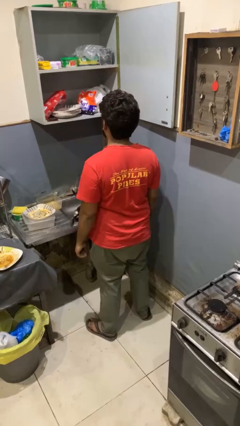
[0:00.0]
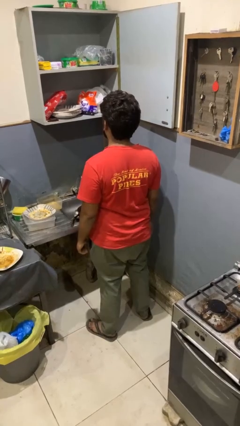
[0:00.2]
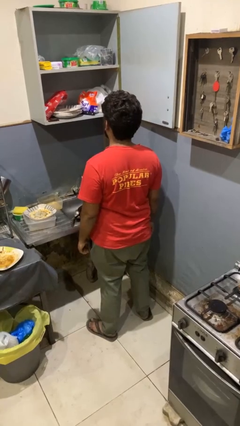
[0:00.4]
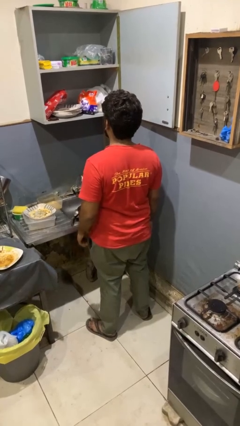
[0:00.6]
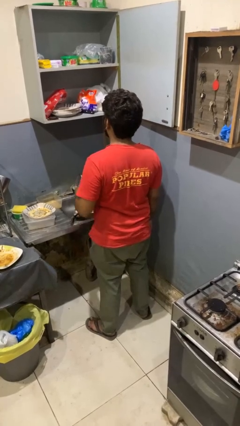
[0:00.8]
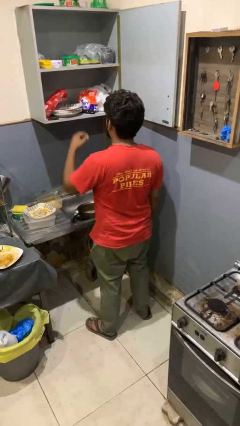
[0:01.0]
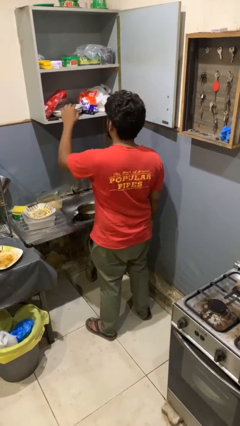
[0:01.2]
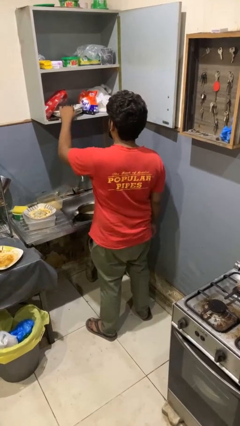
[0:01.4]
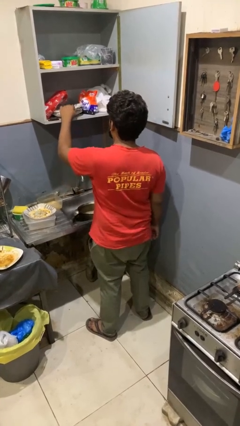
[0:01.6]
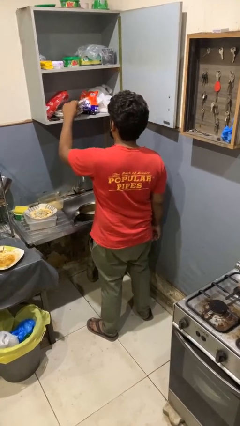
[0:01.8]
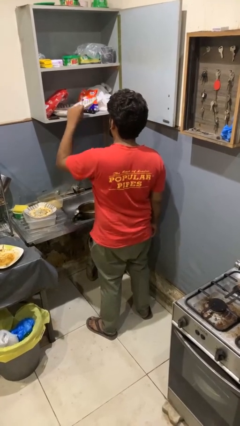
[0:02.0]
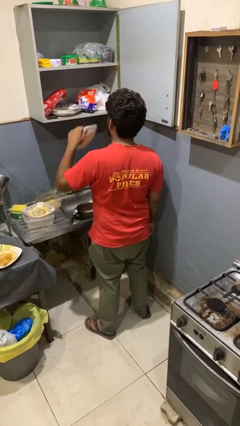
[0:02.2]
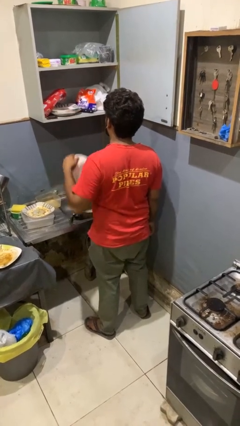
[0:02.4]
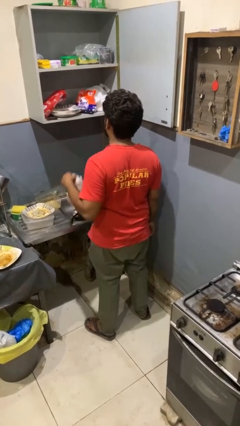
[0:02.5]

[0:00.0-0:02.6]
person takes object from cabinet

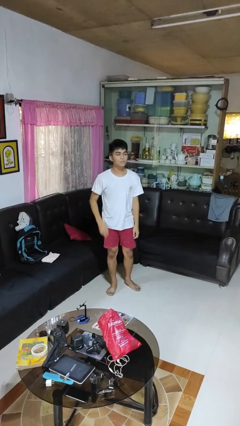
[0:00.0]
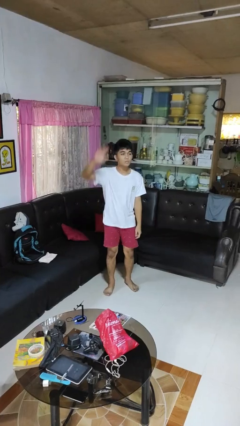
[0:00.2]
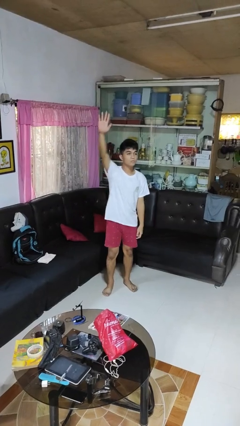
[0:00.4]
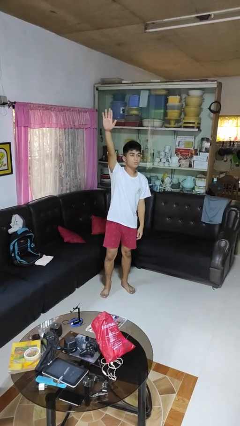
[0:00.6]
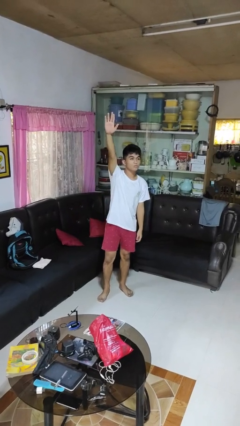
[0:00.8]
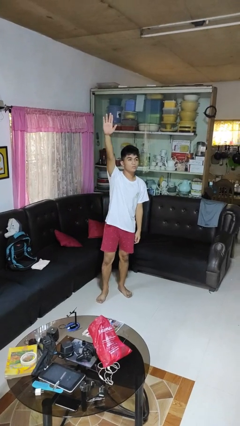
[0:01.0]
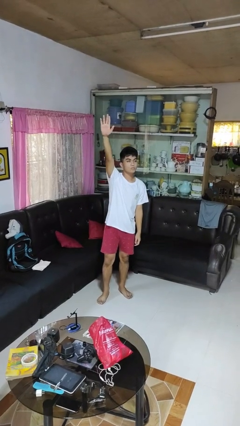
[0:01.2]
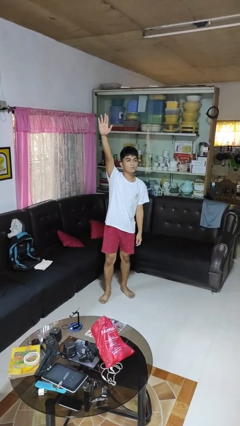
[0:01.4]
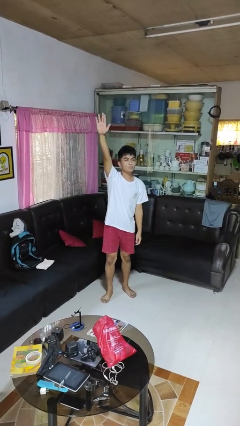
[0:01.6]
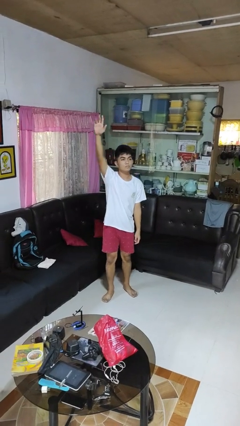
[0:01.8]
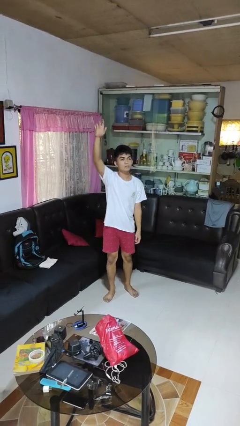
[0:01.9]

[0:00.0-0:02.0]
person gestures raise hand

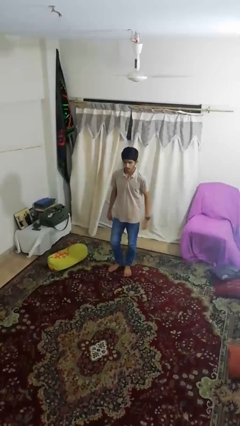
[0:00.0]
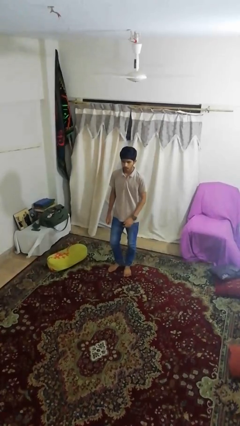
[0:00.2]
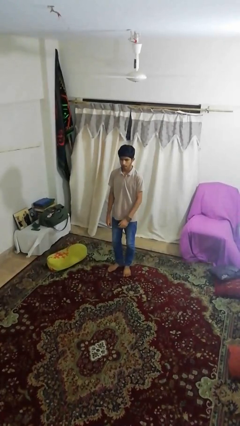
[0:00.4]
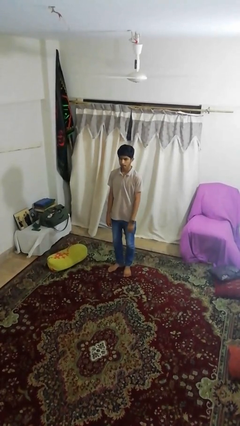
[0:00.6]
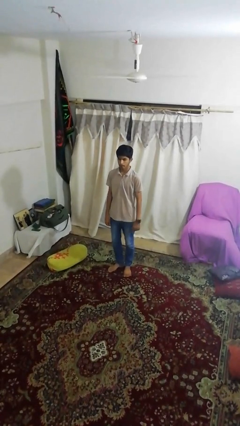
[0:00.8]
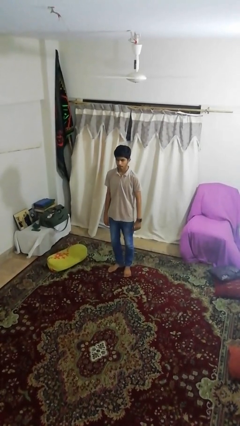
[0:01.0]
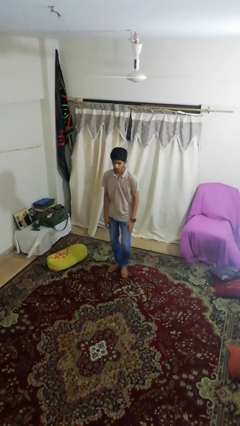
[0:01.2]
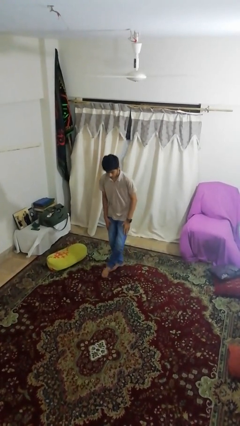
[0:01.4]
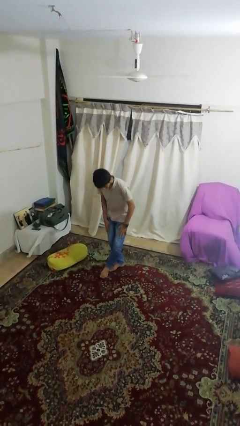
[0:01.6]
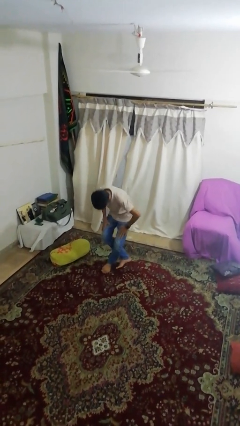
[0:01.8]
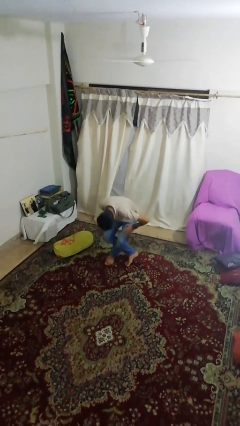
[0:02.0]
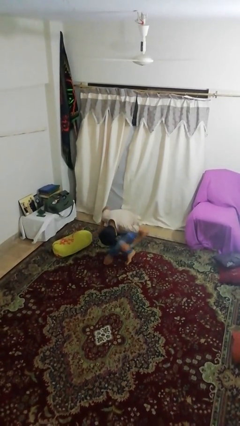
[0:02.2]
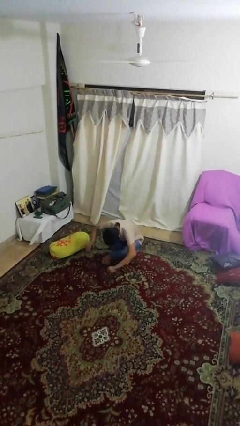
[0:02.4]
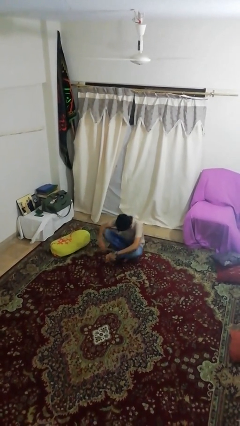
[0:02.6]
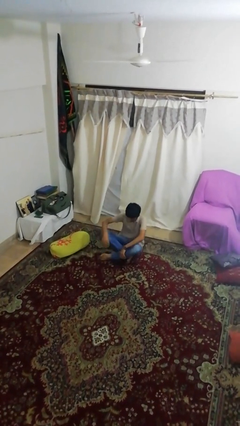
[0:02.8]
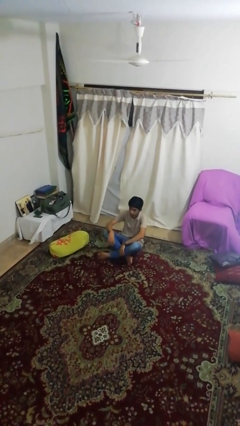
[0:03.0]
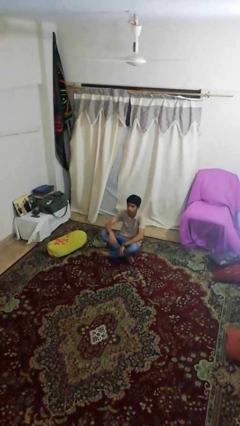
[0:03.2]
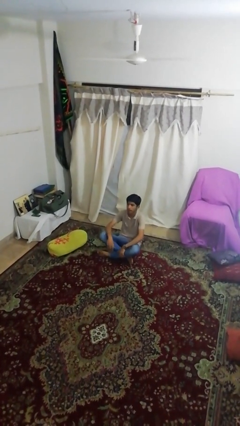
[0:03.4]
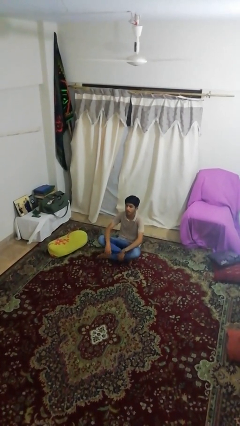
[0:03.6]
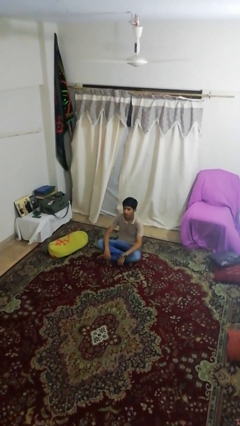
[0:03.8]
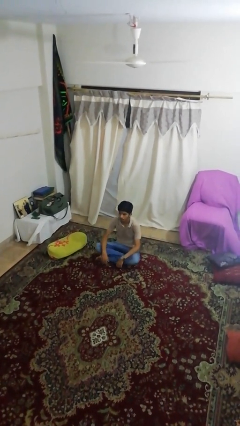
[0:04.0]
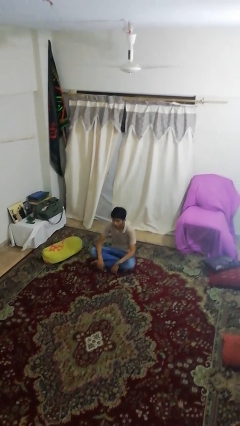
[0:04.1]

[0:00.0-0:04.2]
person sits crisscross

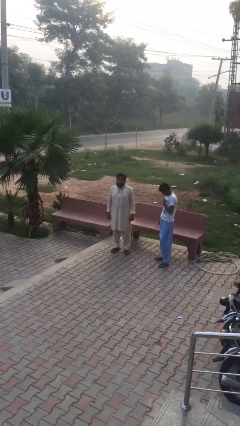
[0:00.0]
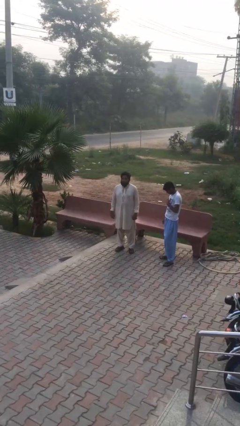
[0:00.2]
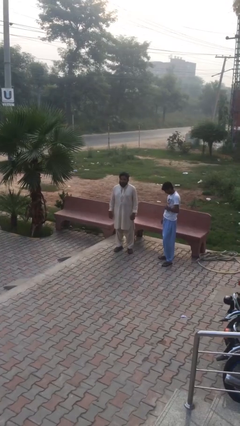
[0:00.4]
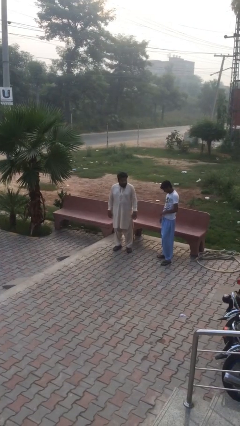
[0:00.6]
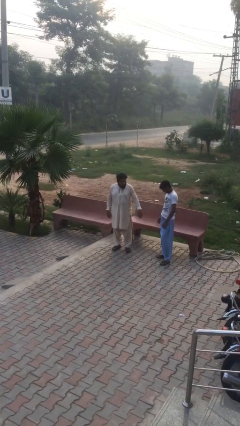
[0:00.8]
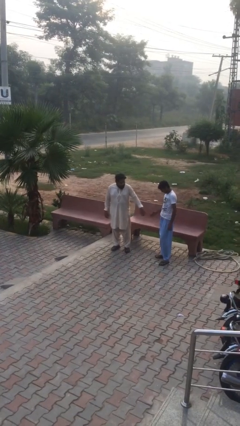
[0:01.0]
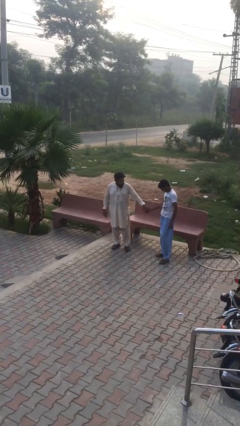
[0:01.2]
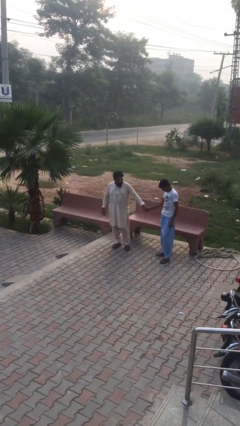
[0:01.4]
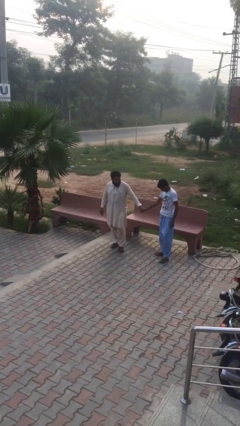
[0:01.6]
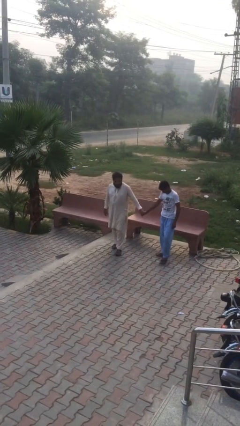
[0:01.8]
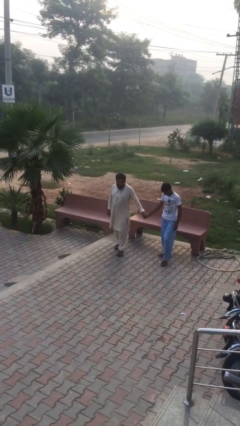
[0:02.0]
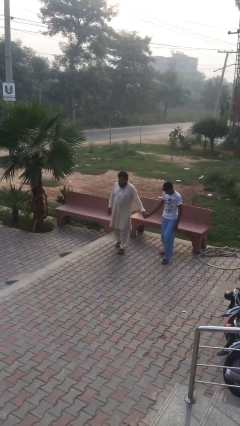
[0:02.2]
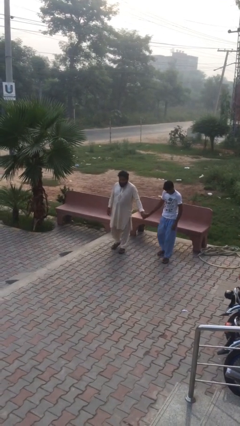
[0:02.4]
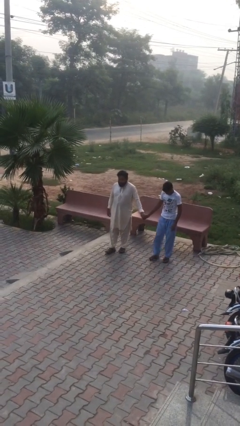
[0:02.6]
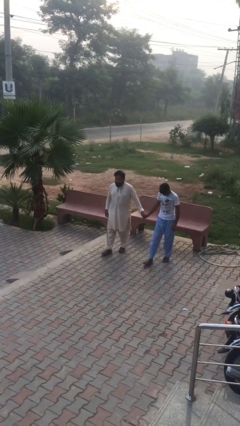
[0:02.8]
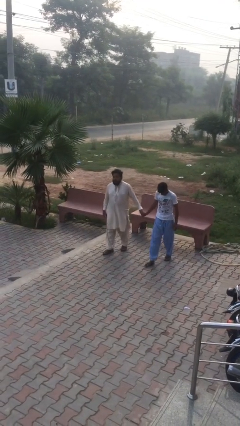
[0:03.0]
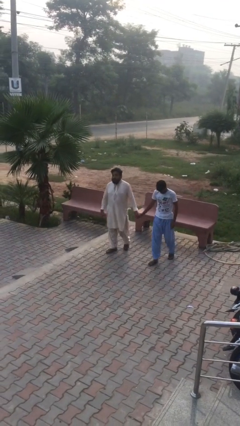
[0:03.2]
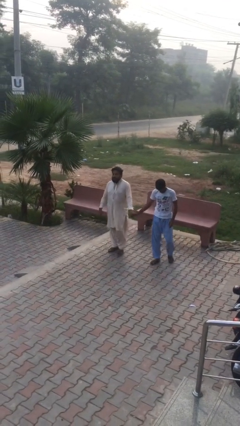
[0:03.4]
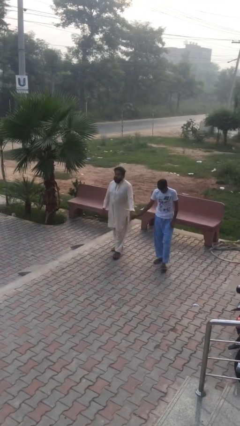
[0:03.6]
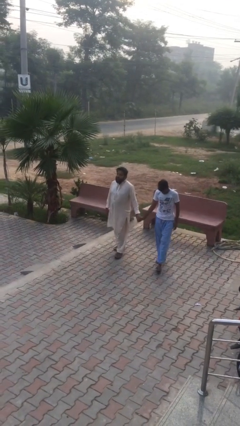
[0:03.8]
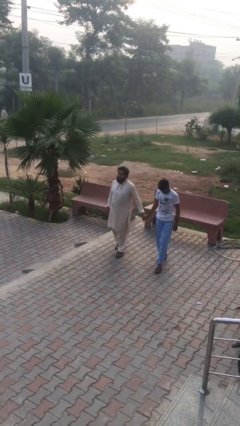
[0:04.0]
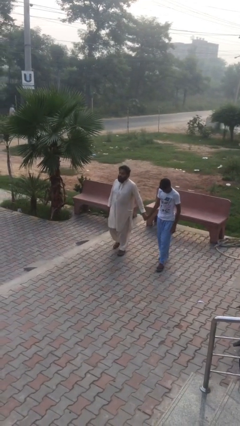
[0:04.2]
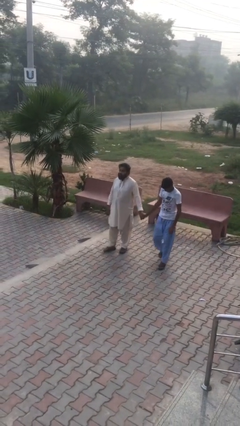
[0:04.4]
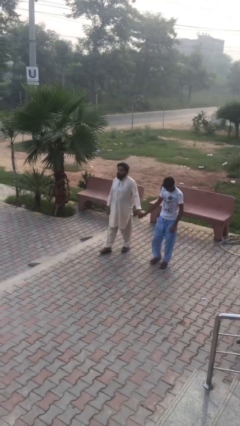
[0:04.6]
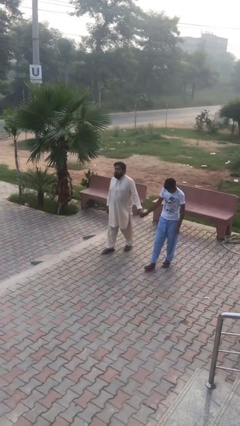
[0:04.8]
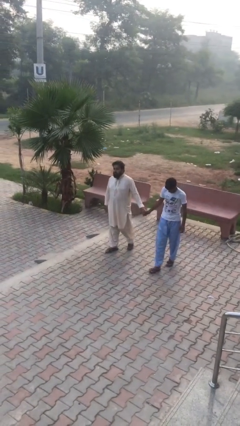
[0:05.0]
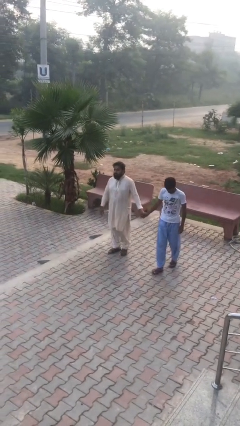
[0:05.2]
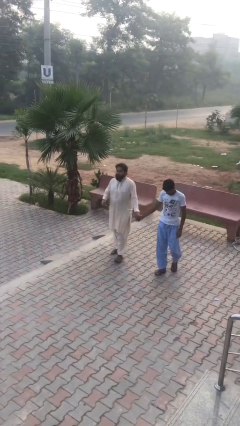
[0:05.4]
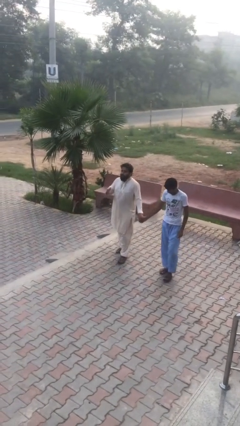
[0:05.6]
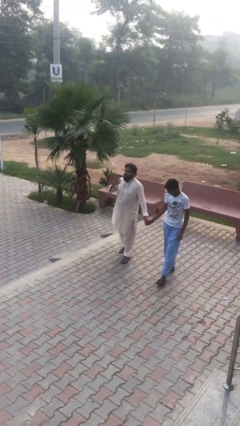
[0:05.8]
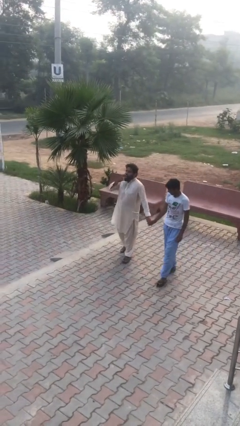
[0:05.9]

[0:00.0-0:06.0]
person holds hand

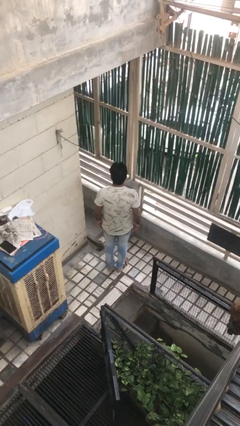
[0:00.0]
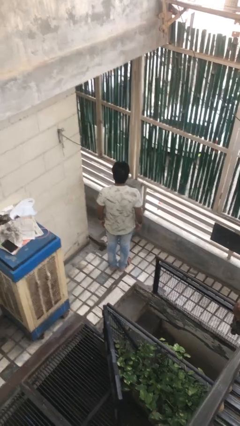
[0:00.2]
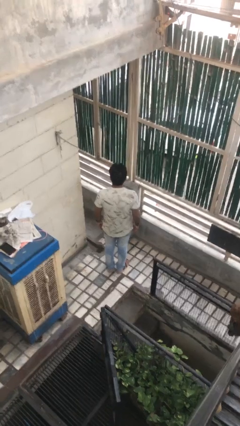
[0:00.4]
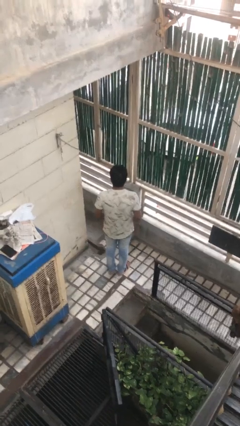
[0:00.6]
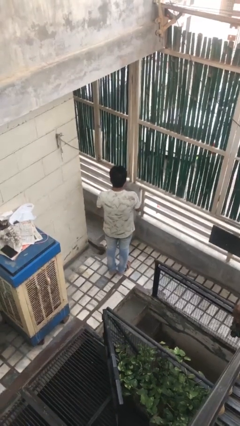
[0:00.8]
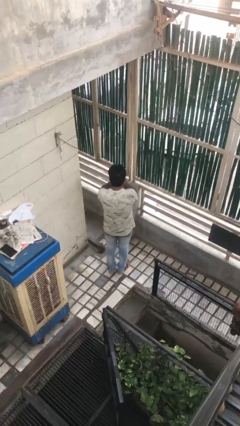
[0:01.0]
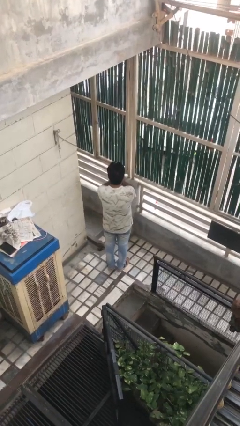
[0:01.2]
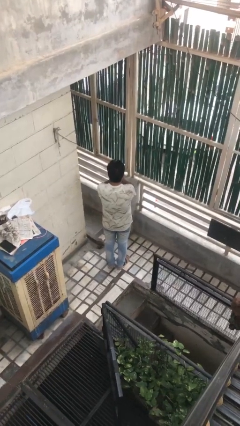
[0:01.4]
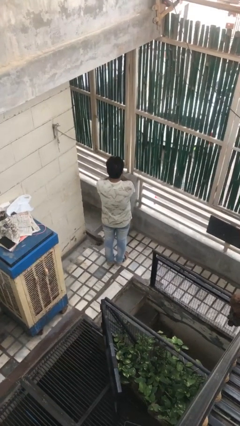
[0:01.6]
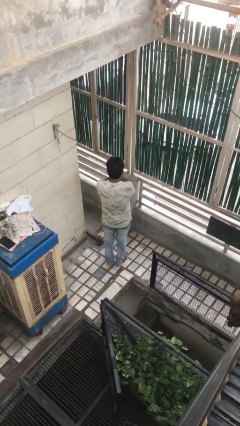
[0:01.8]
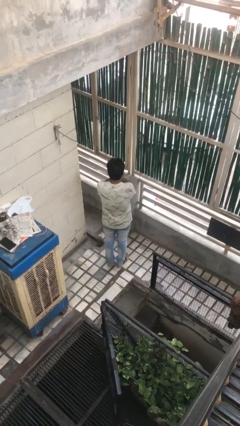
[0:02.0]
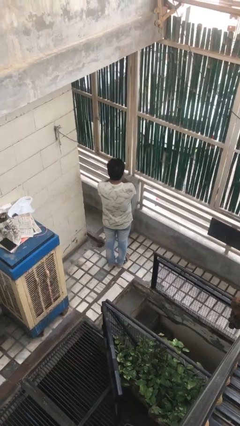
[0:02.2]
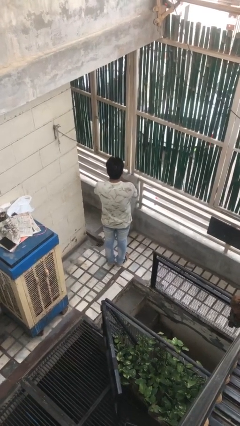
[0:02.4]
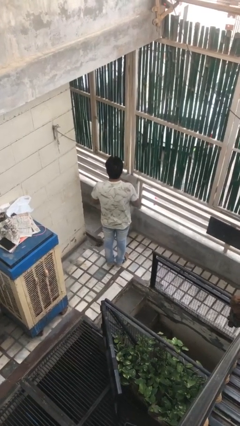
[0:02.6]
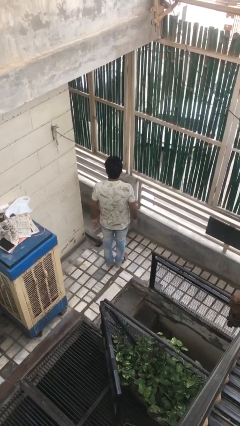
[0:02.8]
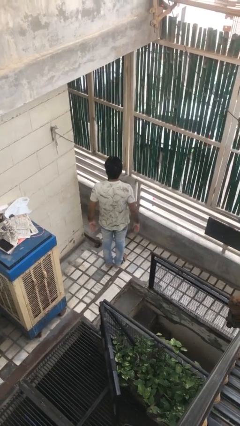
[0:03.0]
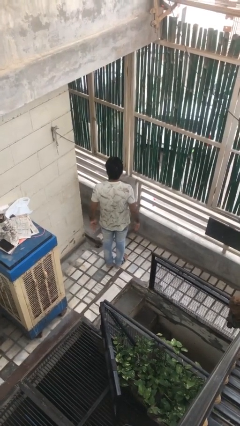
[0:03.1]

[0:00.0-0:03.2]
person covers face with hands
